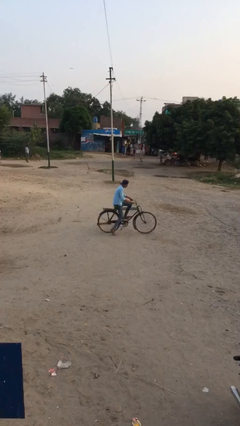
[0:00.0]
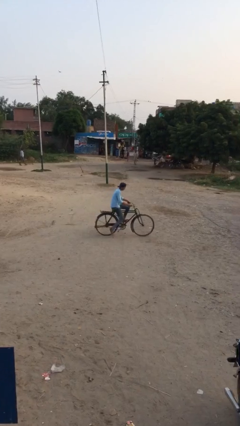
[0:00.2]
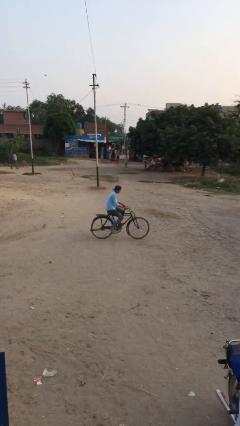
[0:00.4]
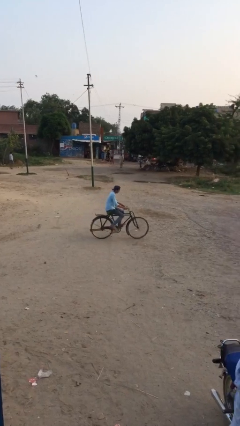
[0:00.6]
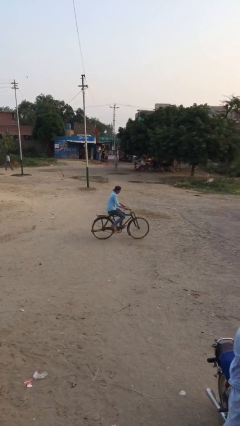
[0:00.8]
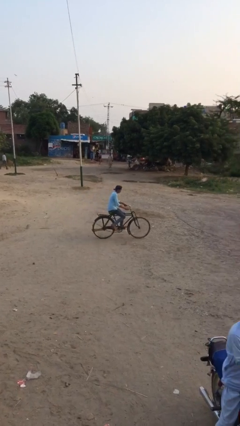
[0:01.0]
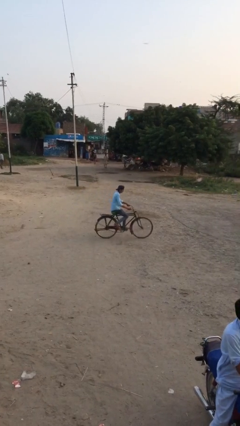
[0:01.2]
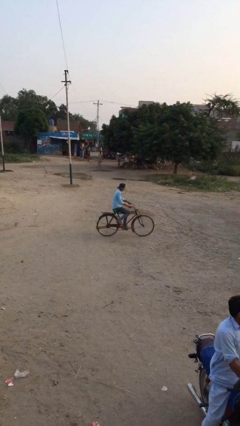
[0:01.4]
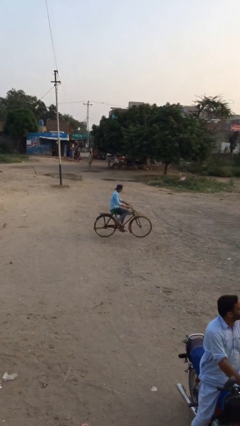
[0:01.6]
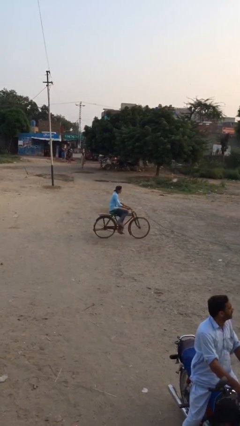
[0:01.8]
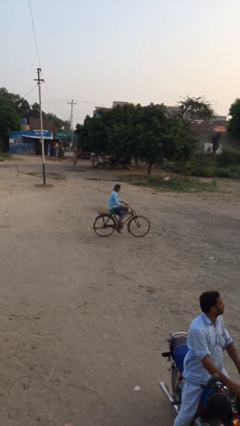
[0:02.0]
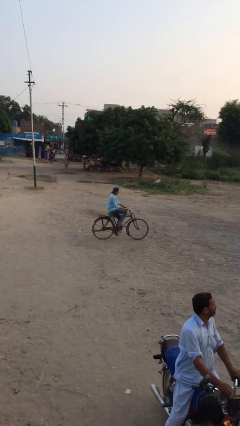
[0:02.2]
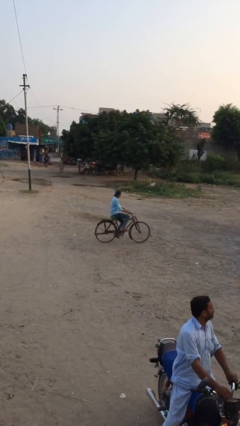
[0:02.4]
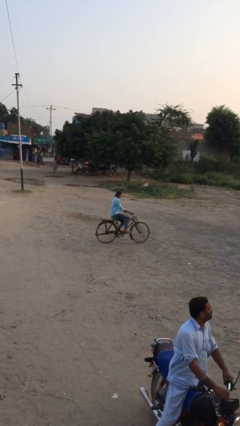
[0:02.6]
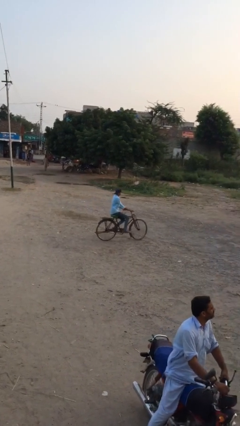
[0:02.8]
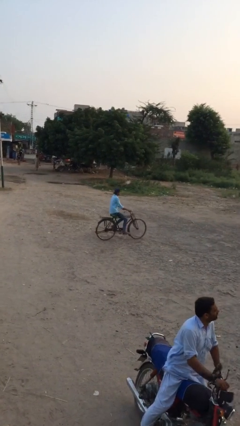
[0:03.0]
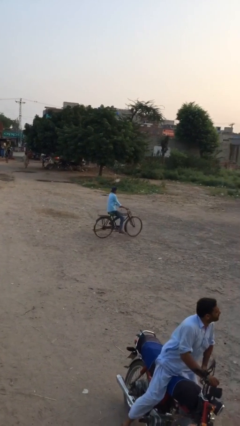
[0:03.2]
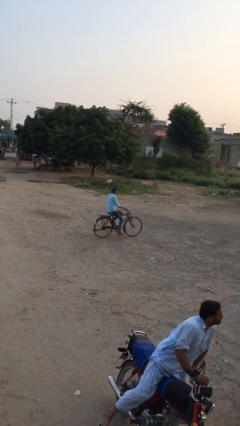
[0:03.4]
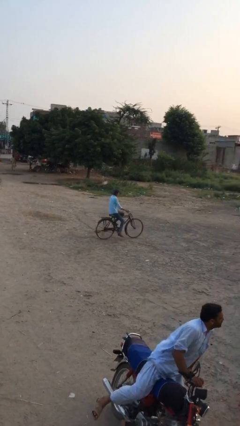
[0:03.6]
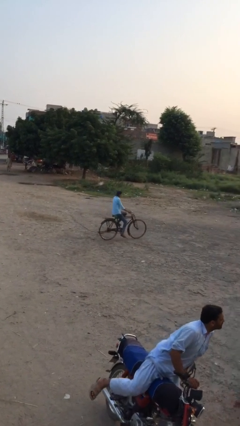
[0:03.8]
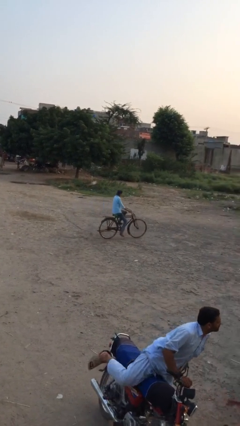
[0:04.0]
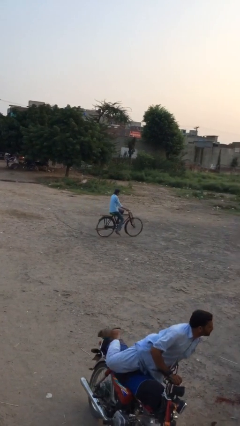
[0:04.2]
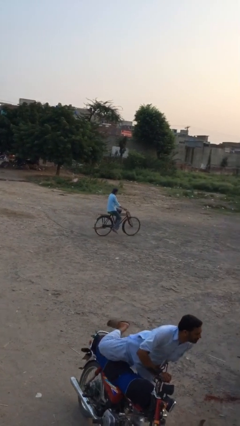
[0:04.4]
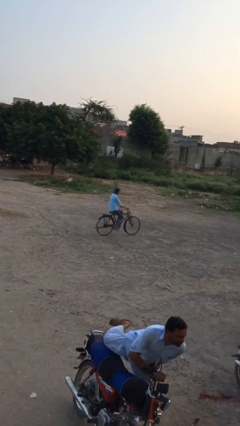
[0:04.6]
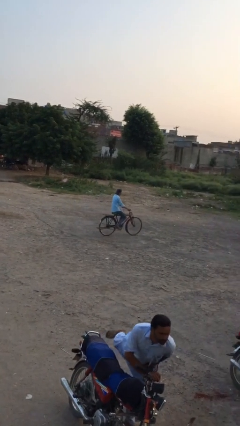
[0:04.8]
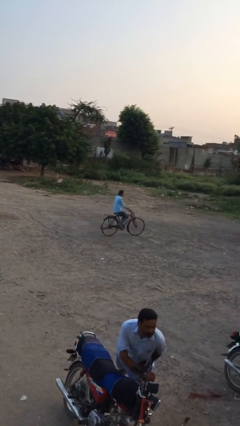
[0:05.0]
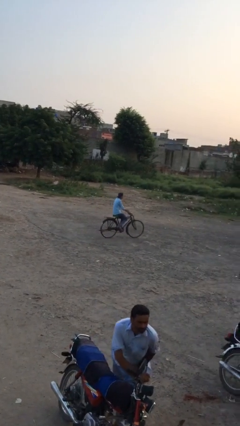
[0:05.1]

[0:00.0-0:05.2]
person rides bicycle

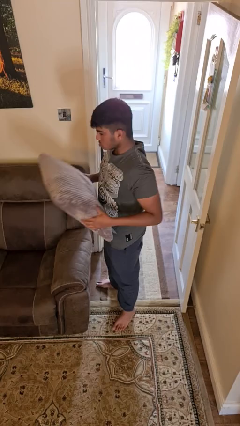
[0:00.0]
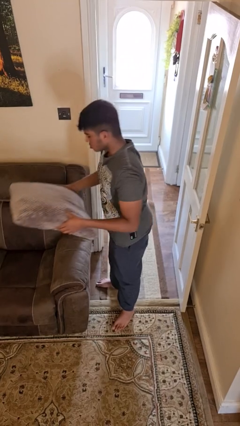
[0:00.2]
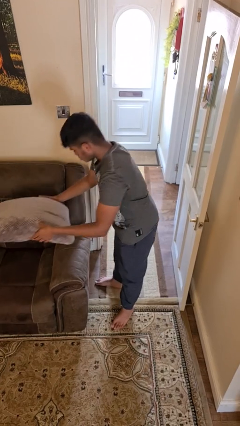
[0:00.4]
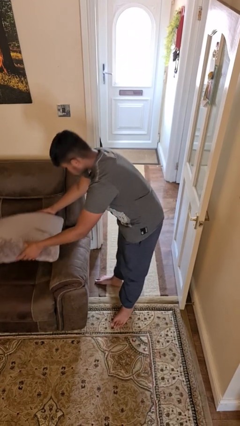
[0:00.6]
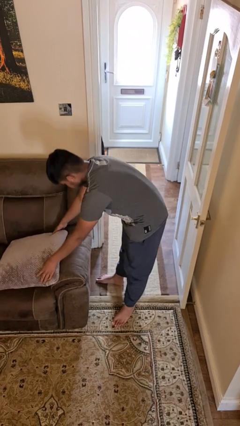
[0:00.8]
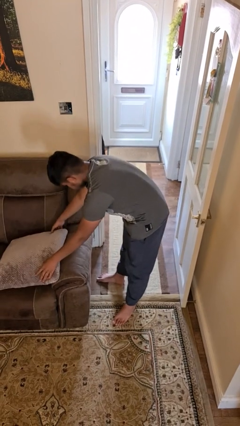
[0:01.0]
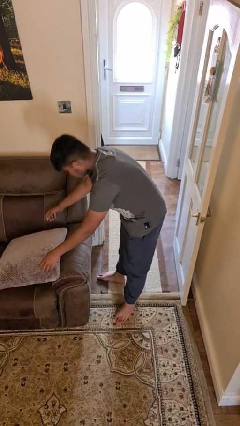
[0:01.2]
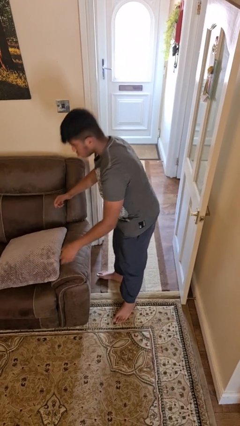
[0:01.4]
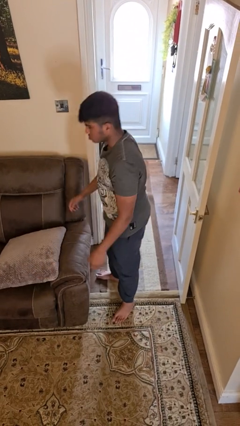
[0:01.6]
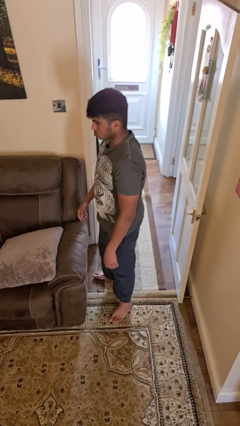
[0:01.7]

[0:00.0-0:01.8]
person puts down object on couch

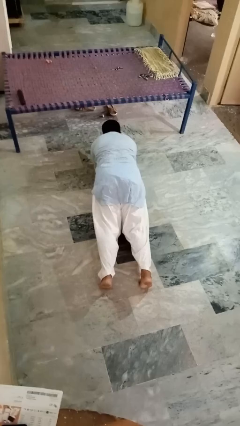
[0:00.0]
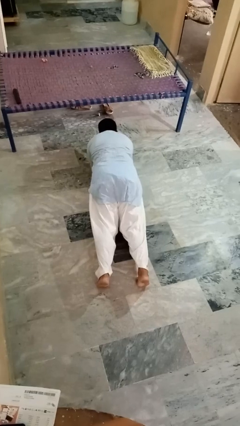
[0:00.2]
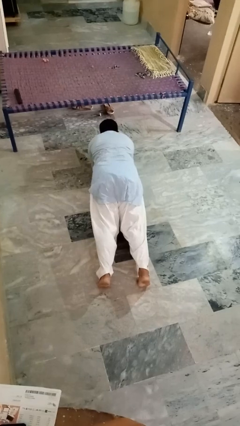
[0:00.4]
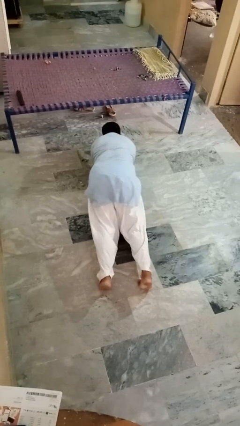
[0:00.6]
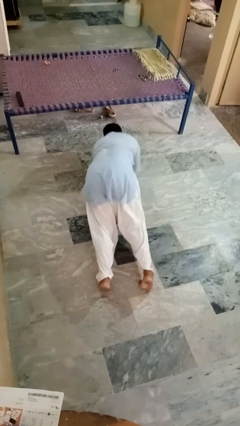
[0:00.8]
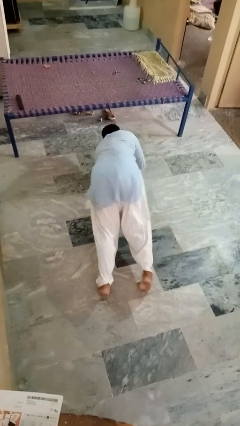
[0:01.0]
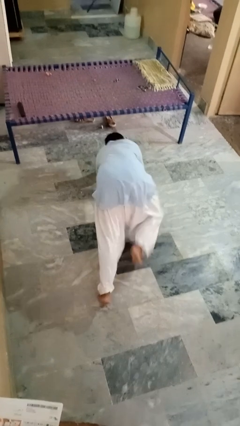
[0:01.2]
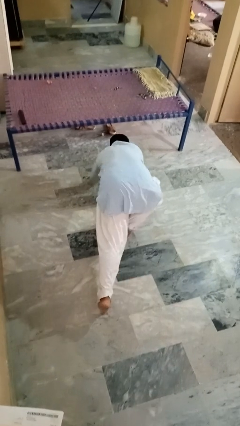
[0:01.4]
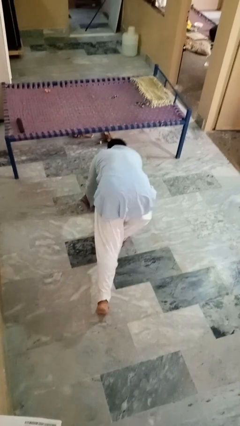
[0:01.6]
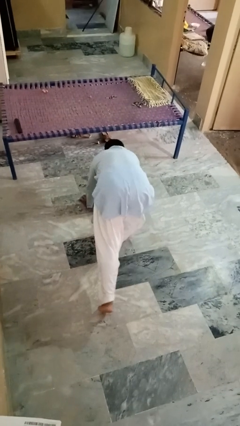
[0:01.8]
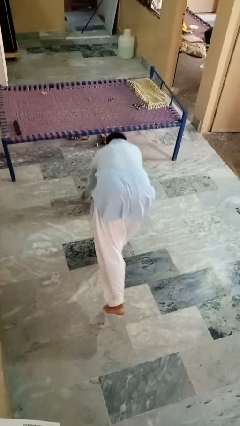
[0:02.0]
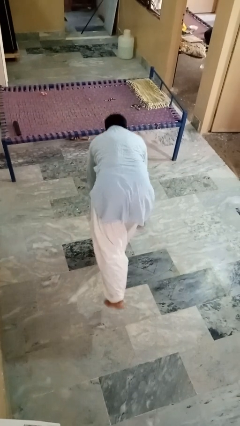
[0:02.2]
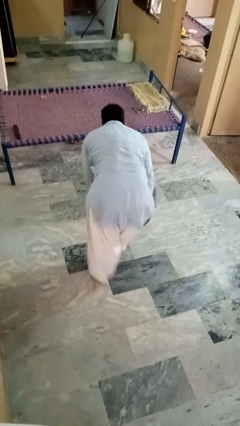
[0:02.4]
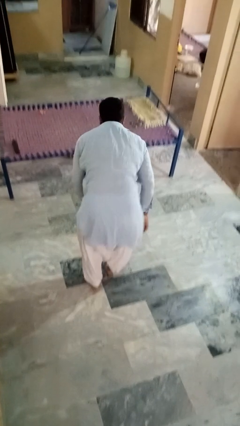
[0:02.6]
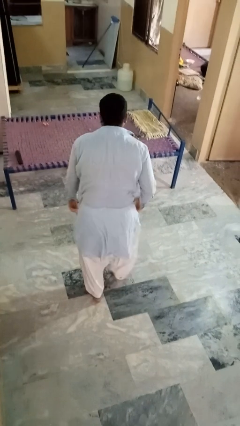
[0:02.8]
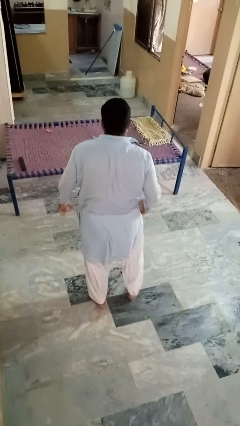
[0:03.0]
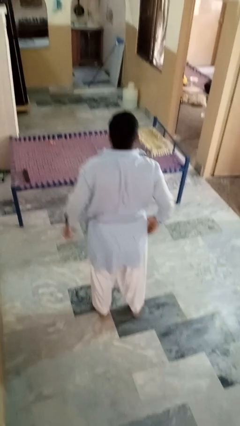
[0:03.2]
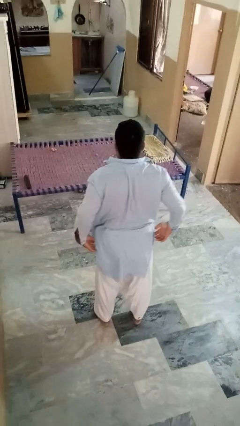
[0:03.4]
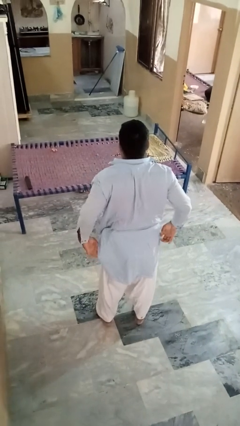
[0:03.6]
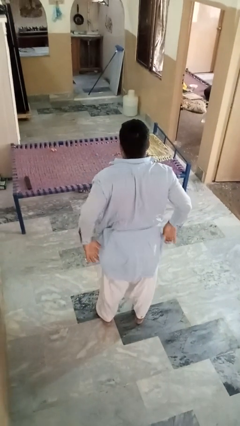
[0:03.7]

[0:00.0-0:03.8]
person stands up from floor

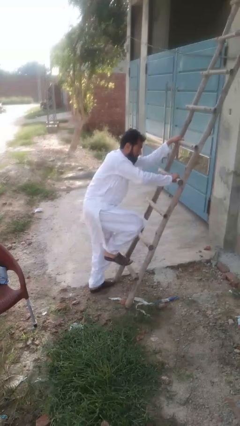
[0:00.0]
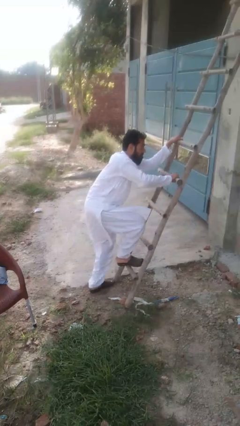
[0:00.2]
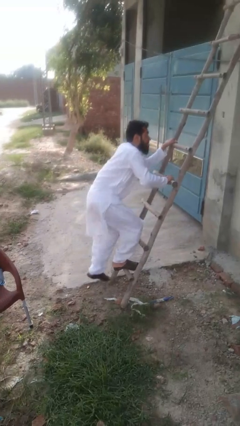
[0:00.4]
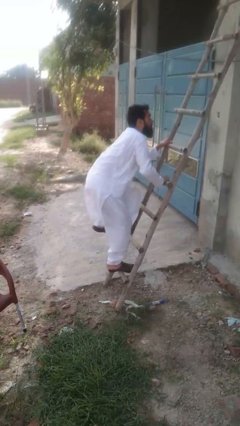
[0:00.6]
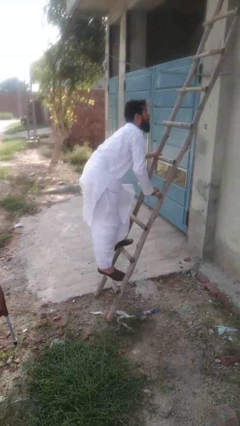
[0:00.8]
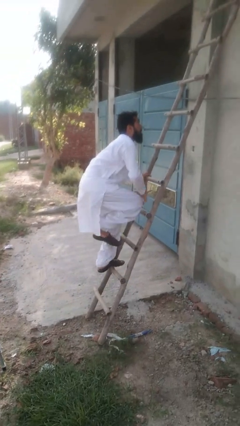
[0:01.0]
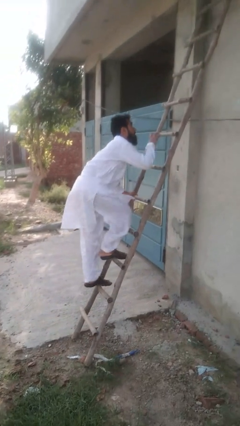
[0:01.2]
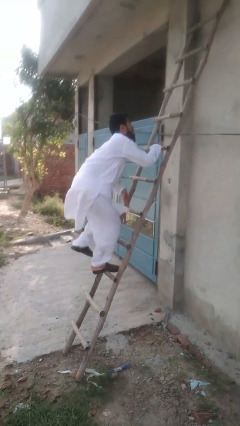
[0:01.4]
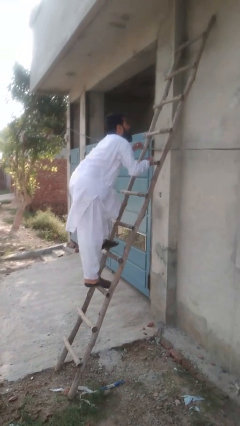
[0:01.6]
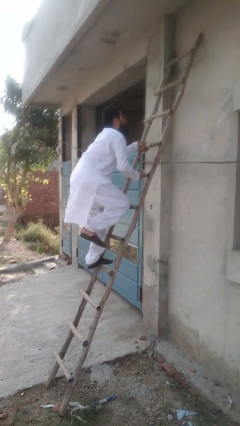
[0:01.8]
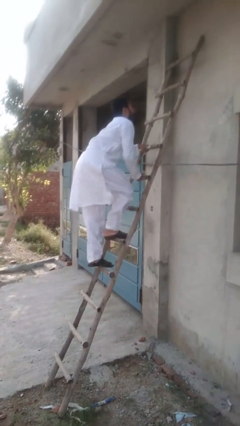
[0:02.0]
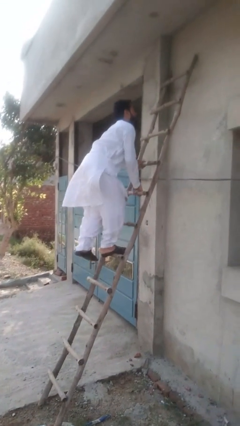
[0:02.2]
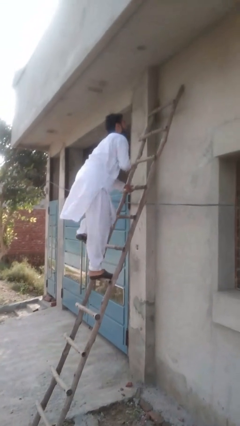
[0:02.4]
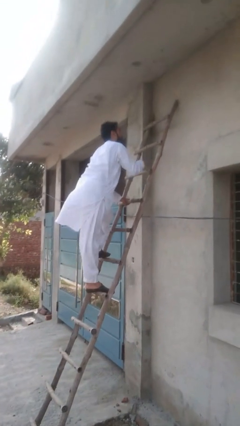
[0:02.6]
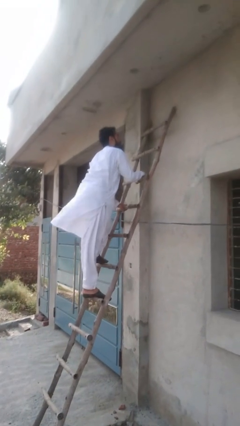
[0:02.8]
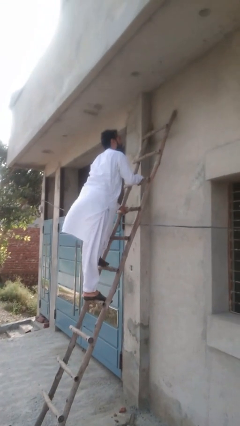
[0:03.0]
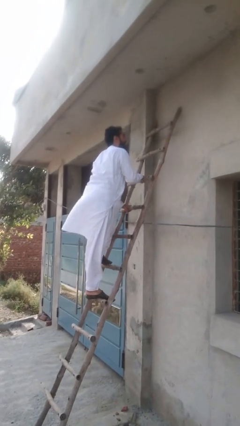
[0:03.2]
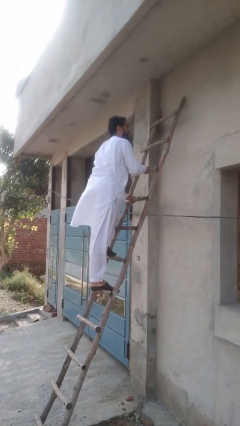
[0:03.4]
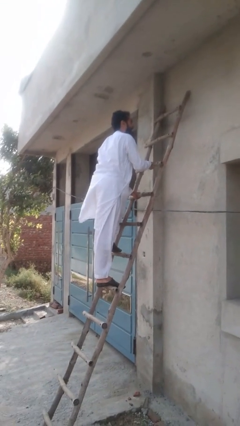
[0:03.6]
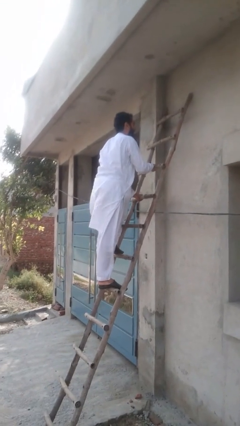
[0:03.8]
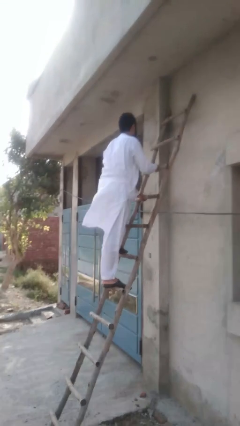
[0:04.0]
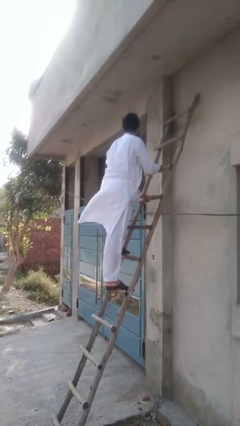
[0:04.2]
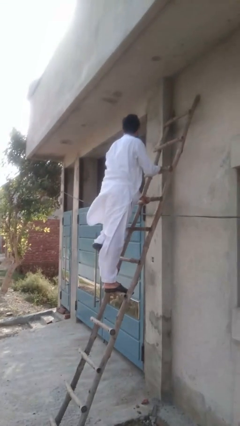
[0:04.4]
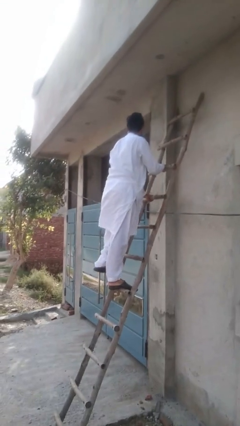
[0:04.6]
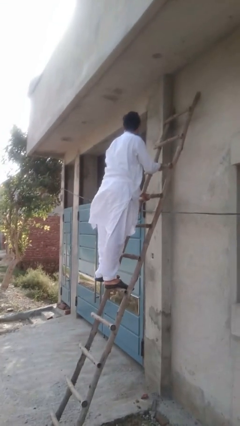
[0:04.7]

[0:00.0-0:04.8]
person climbs up stairs

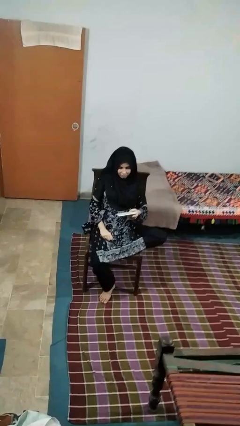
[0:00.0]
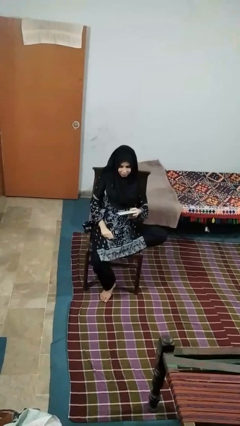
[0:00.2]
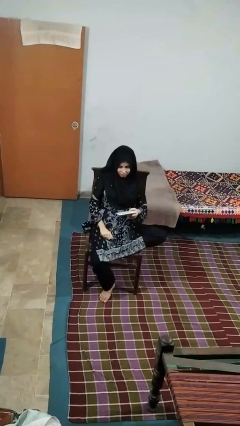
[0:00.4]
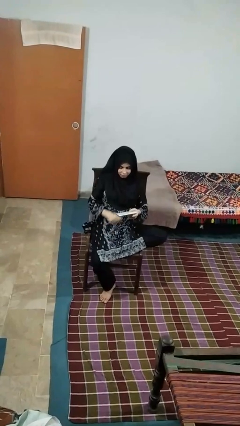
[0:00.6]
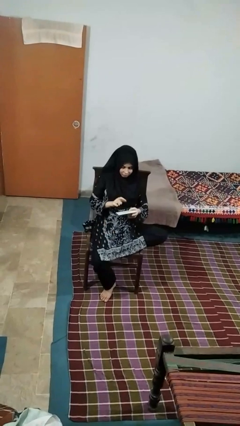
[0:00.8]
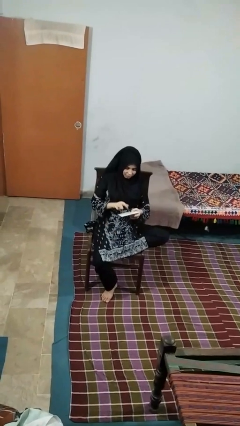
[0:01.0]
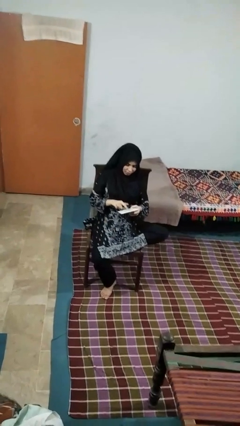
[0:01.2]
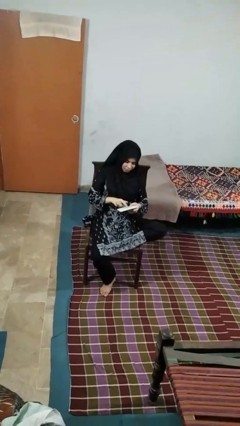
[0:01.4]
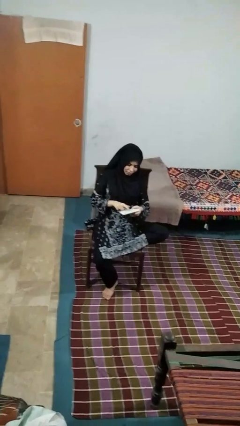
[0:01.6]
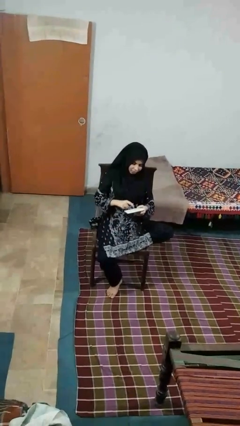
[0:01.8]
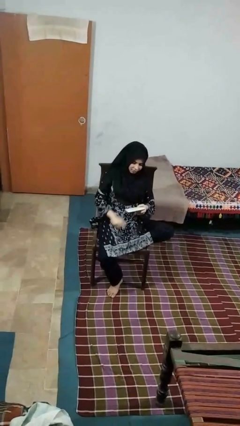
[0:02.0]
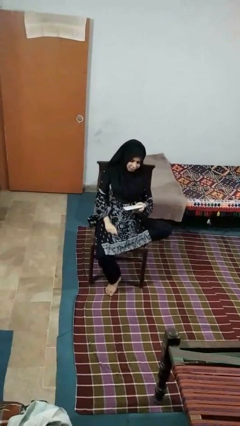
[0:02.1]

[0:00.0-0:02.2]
person taps object with finger

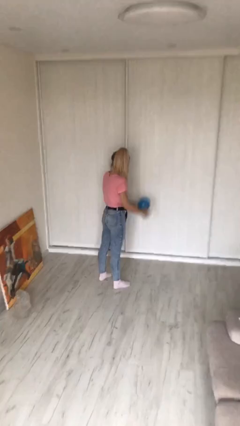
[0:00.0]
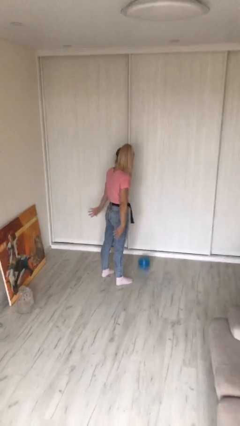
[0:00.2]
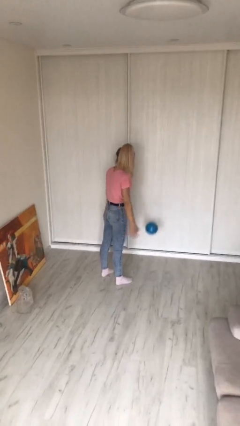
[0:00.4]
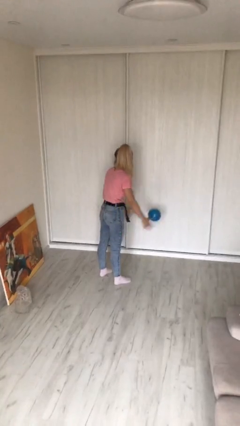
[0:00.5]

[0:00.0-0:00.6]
person bounces ball on floor
